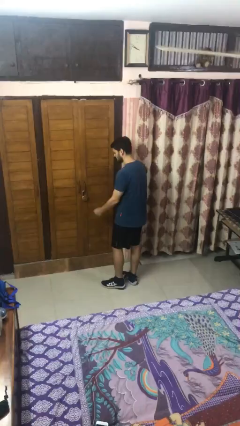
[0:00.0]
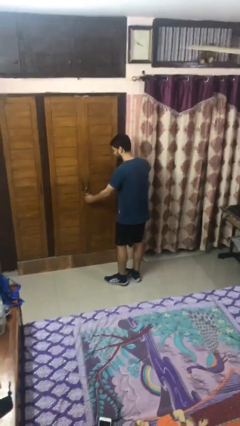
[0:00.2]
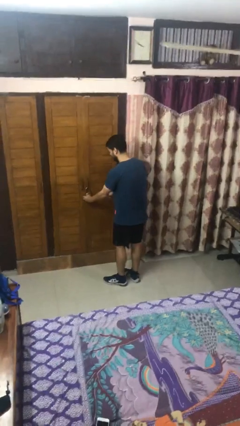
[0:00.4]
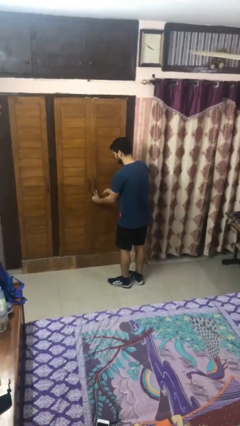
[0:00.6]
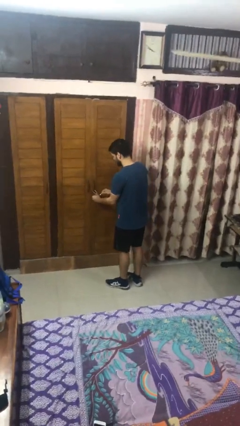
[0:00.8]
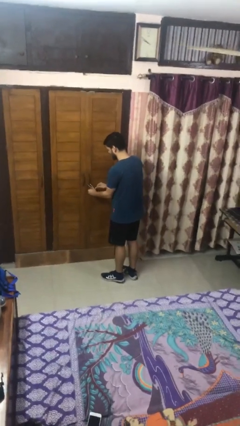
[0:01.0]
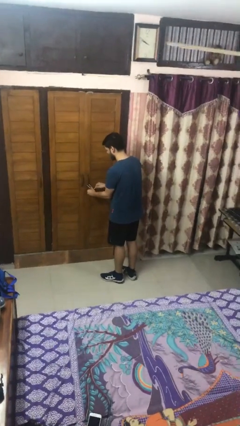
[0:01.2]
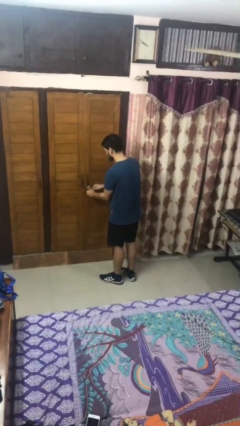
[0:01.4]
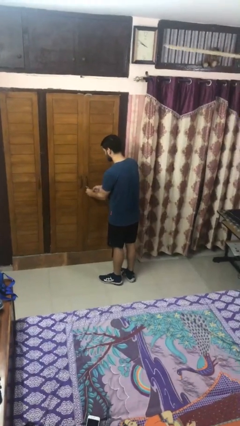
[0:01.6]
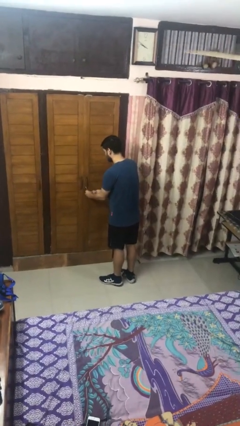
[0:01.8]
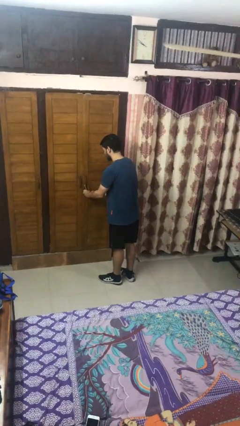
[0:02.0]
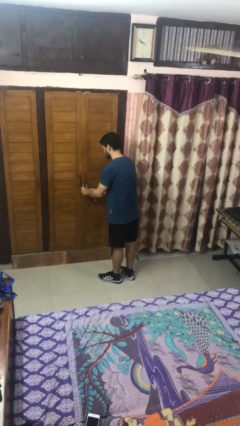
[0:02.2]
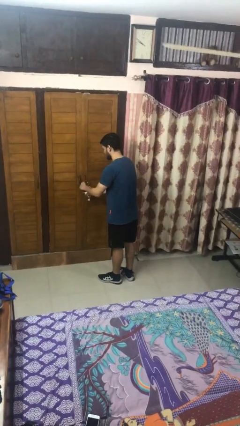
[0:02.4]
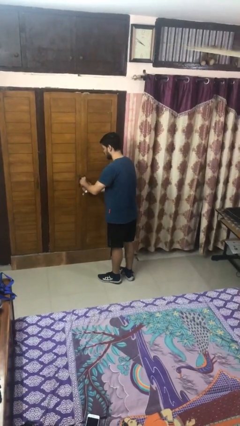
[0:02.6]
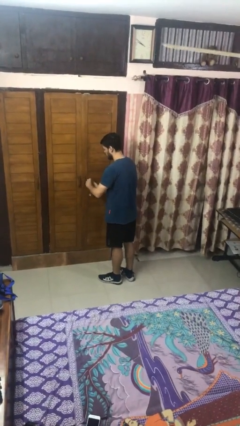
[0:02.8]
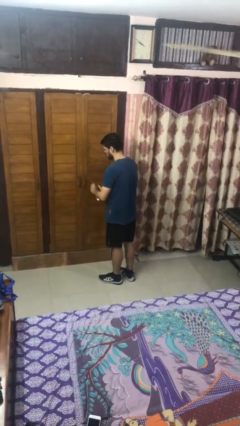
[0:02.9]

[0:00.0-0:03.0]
person unlocks door with keys

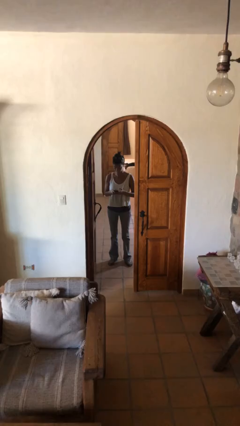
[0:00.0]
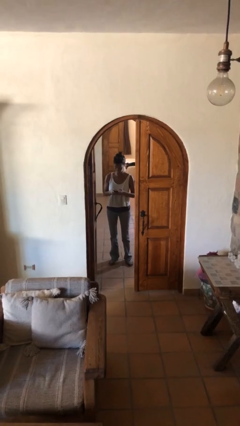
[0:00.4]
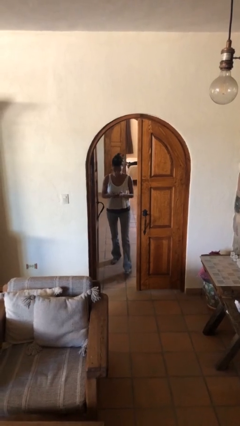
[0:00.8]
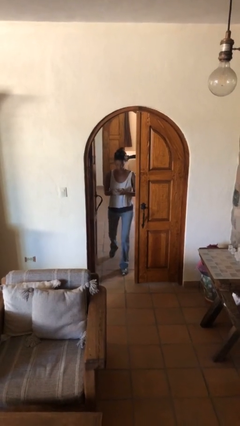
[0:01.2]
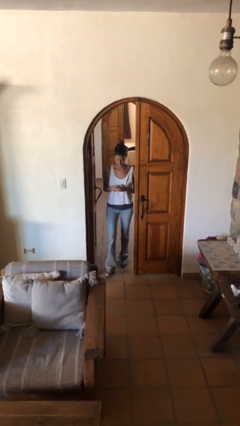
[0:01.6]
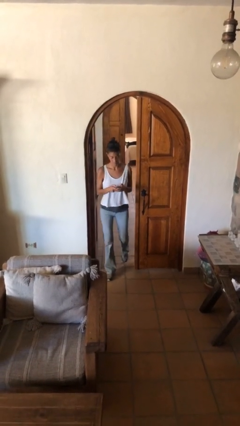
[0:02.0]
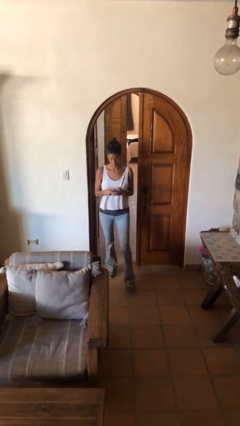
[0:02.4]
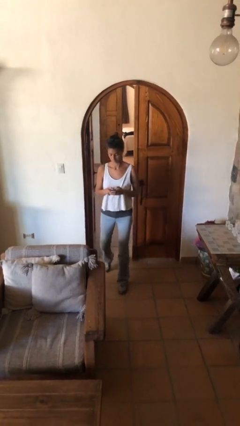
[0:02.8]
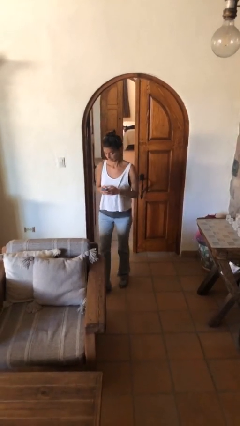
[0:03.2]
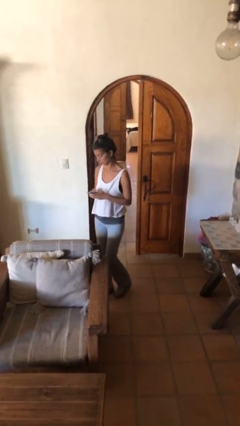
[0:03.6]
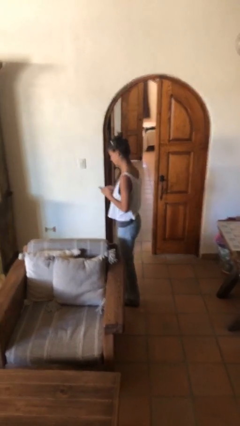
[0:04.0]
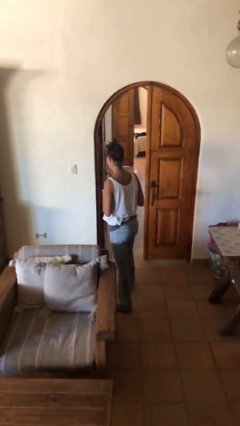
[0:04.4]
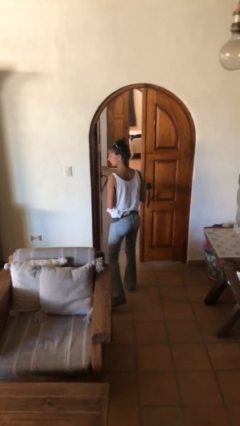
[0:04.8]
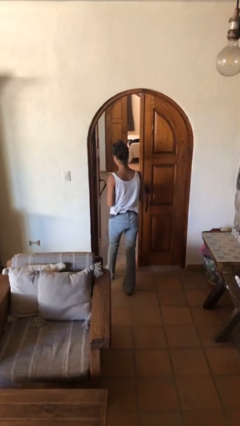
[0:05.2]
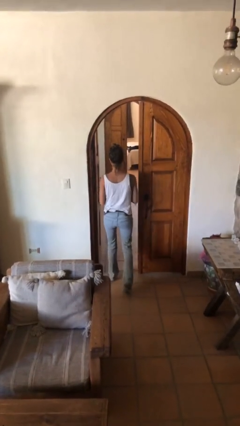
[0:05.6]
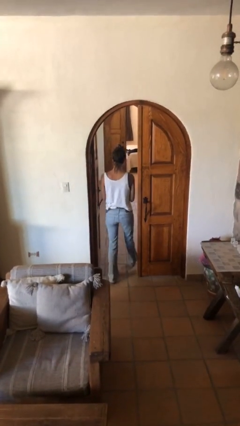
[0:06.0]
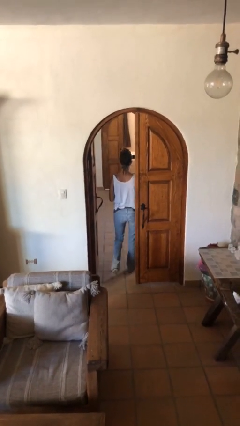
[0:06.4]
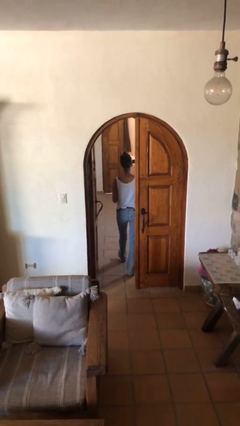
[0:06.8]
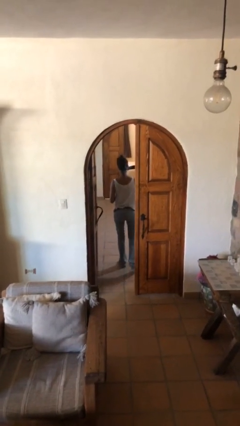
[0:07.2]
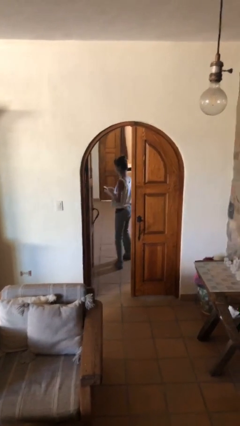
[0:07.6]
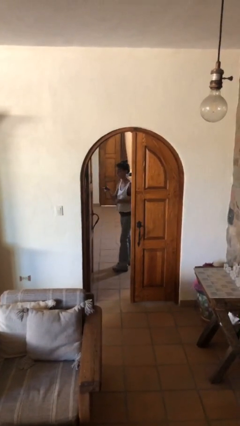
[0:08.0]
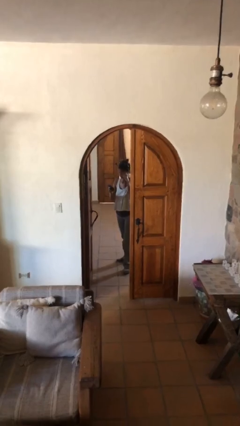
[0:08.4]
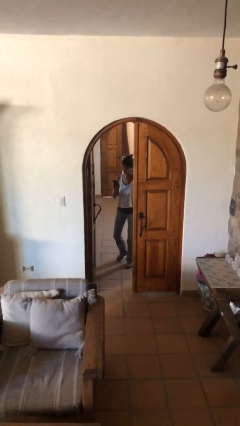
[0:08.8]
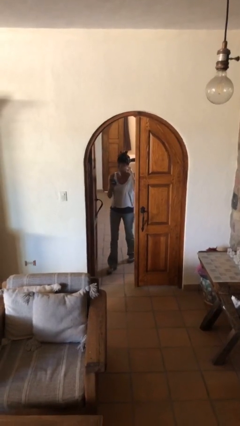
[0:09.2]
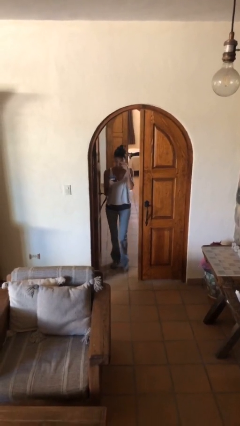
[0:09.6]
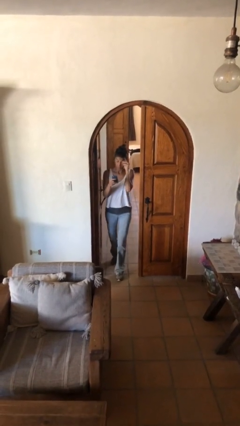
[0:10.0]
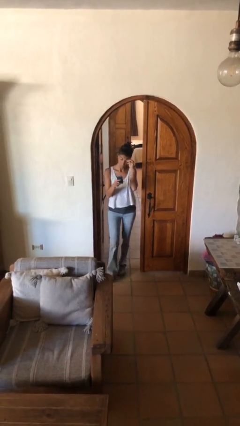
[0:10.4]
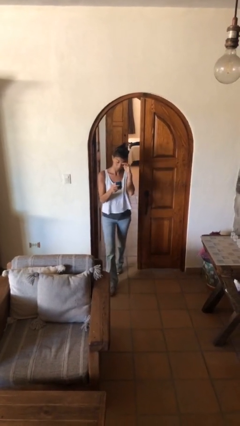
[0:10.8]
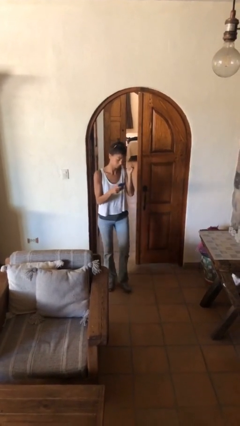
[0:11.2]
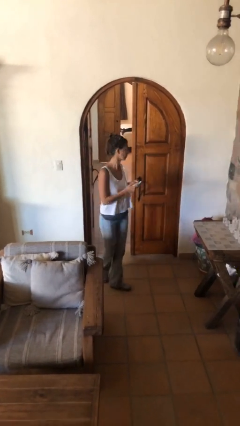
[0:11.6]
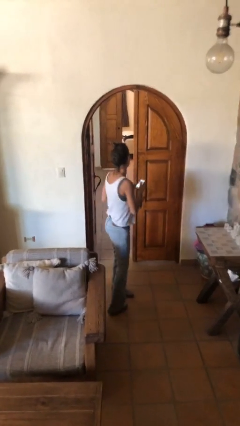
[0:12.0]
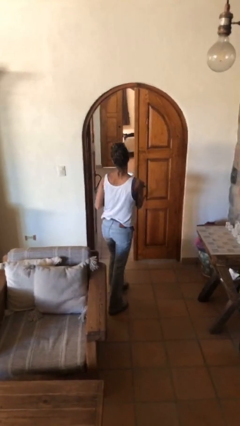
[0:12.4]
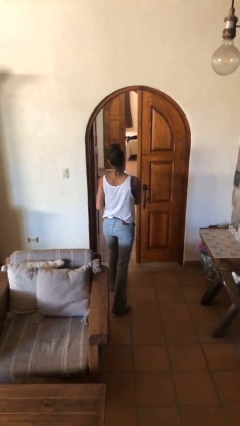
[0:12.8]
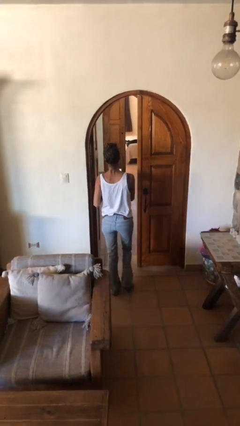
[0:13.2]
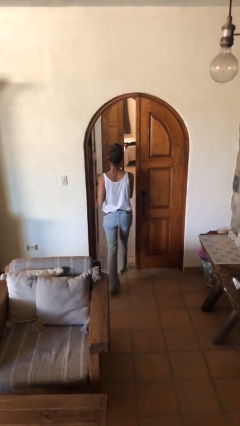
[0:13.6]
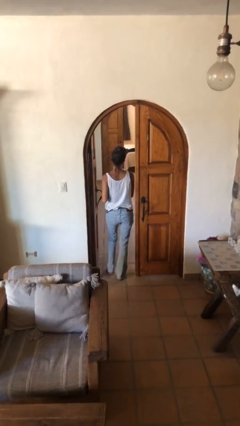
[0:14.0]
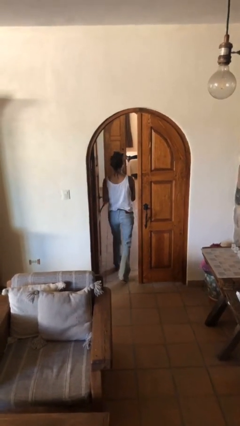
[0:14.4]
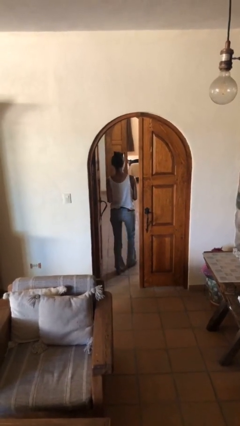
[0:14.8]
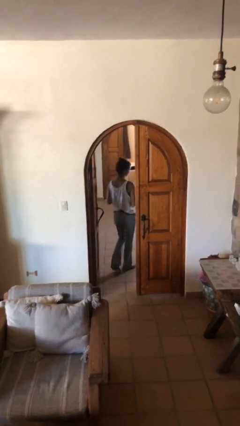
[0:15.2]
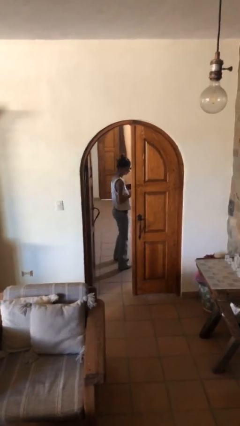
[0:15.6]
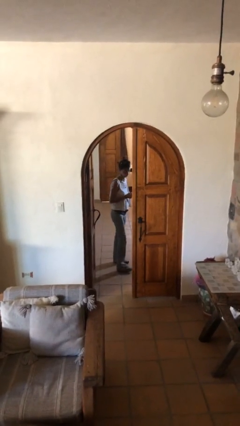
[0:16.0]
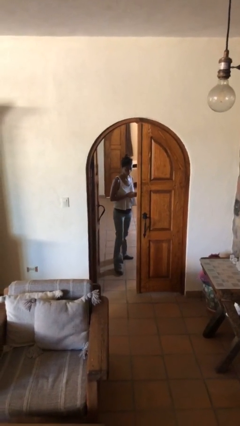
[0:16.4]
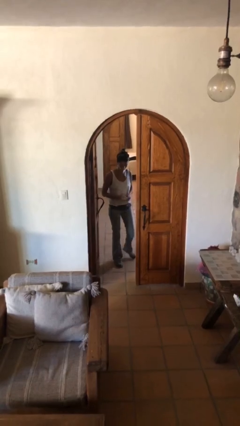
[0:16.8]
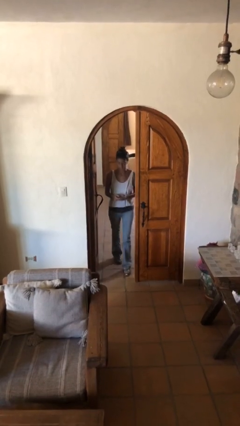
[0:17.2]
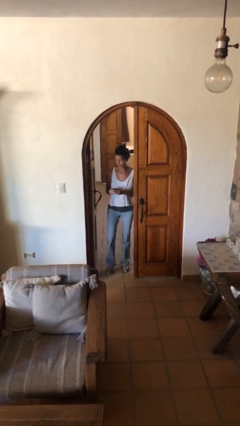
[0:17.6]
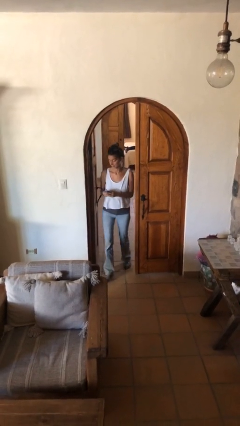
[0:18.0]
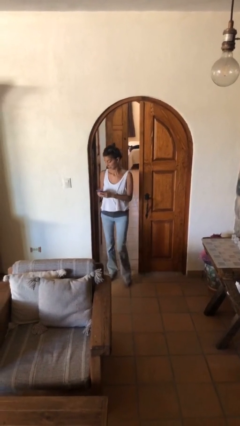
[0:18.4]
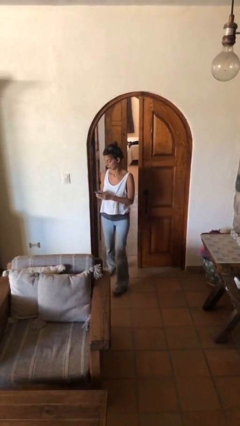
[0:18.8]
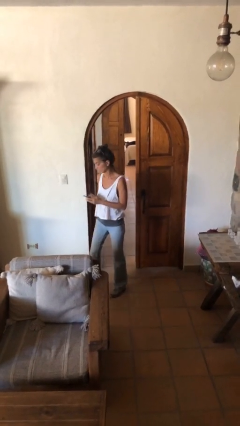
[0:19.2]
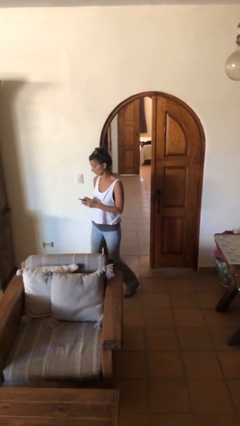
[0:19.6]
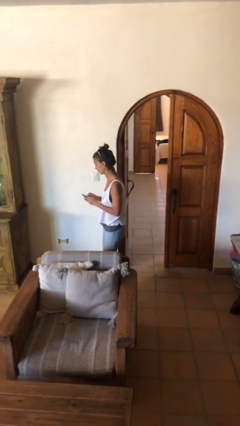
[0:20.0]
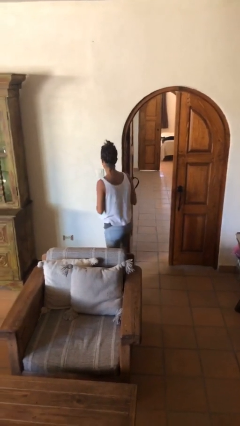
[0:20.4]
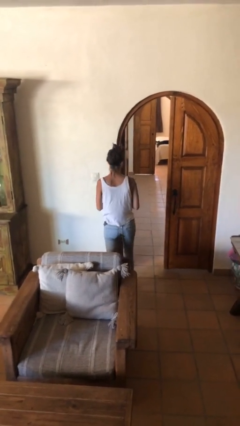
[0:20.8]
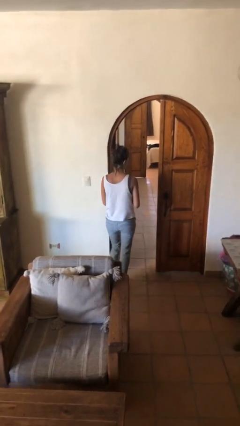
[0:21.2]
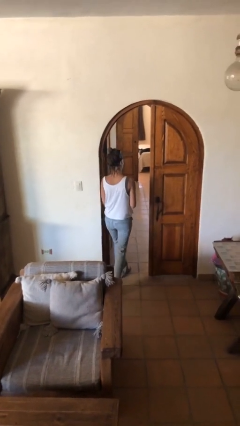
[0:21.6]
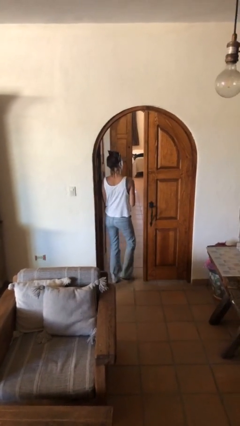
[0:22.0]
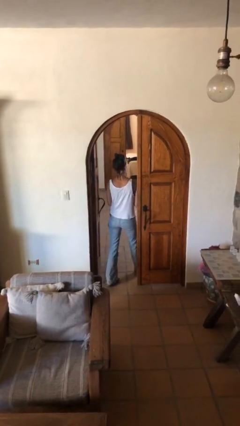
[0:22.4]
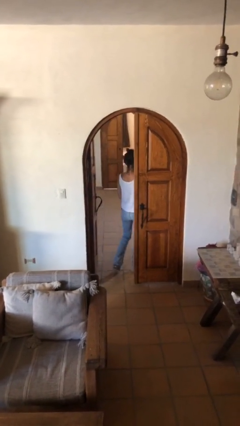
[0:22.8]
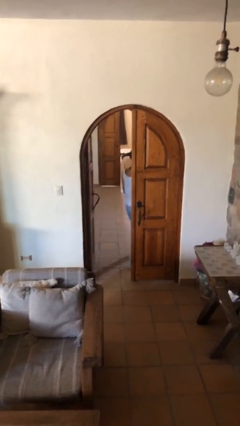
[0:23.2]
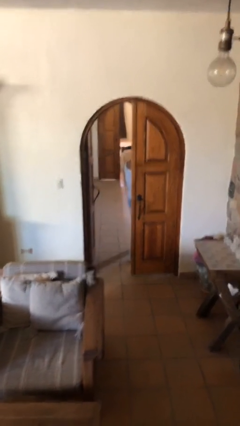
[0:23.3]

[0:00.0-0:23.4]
person texts on phone

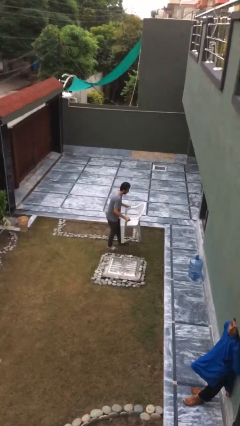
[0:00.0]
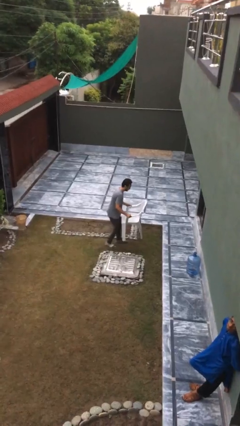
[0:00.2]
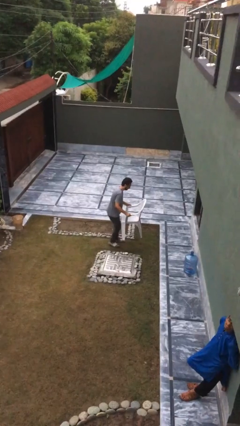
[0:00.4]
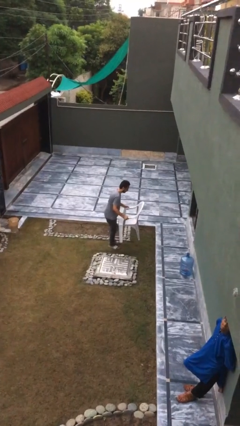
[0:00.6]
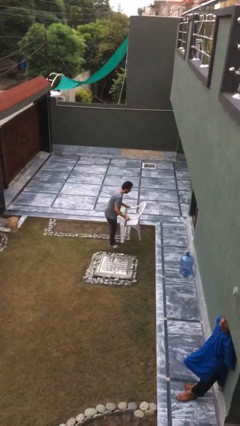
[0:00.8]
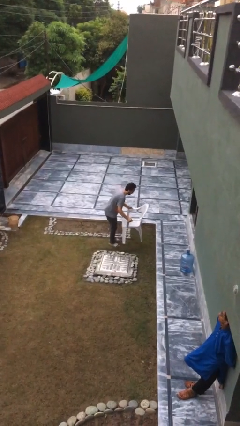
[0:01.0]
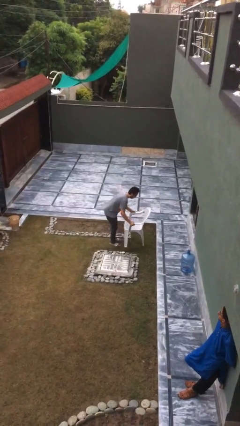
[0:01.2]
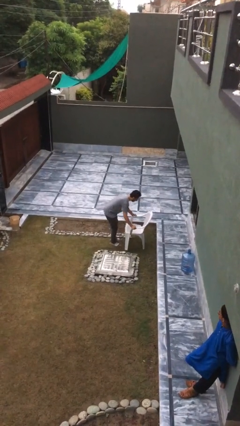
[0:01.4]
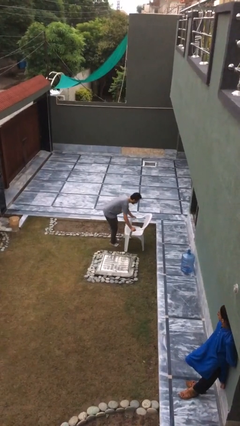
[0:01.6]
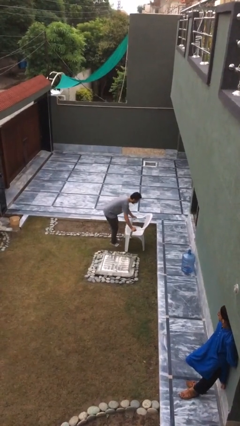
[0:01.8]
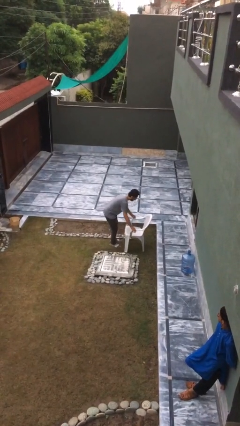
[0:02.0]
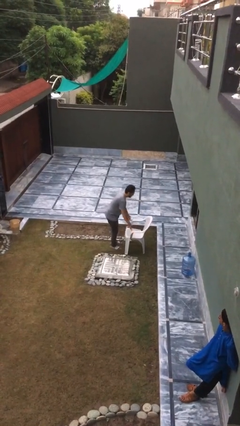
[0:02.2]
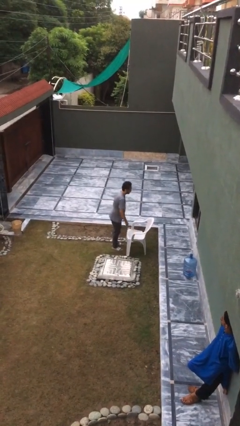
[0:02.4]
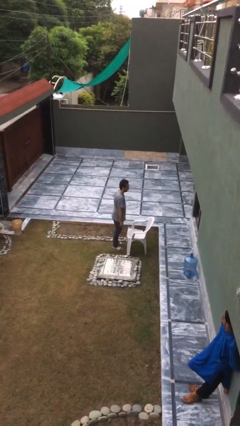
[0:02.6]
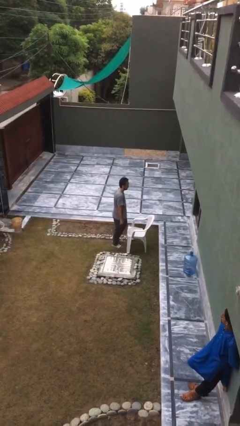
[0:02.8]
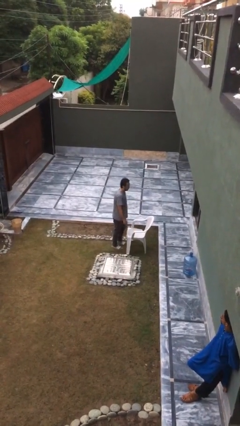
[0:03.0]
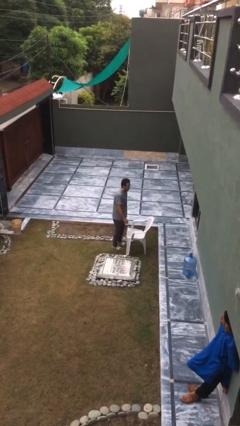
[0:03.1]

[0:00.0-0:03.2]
person puts down object on floor
